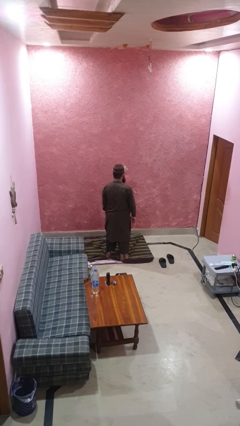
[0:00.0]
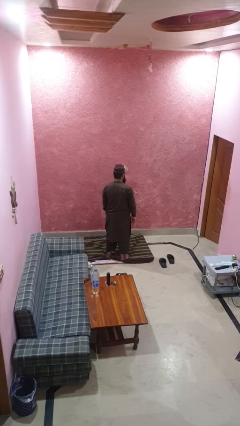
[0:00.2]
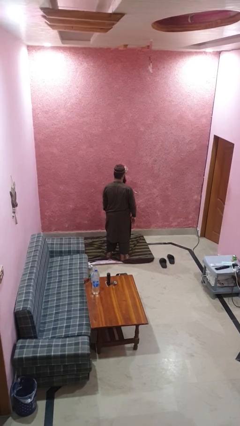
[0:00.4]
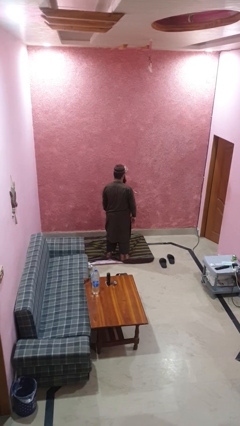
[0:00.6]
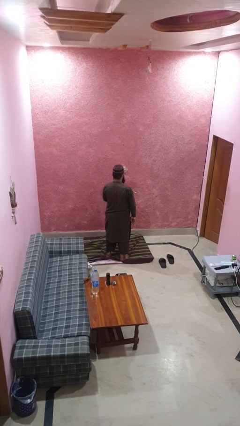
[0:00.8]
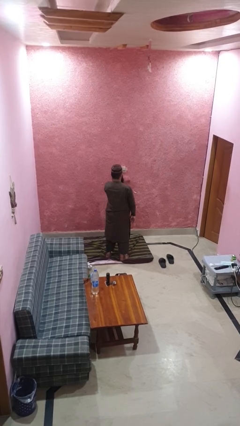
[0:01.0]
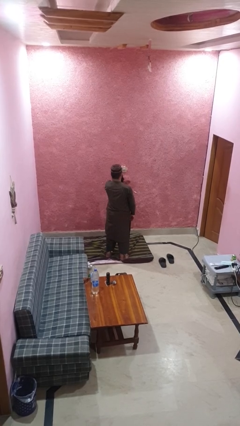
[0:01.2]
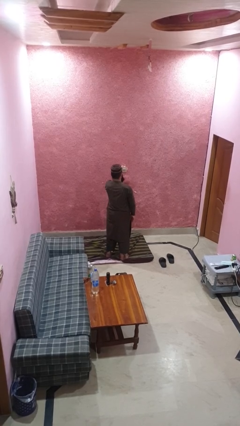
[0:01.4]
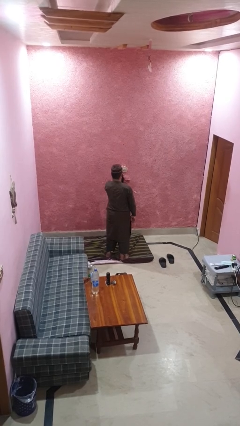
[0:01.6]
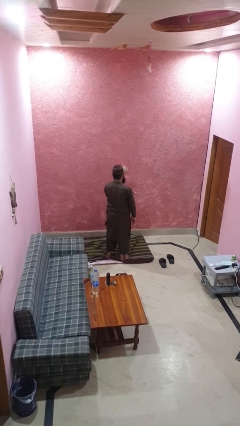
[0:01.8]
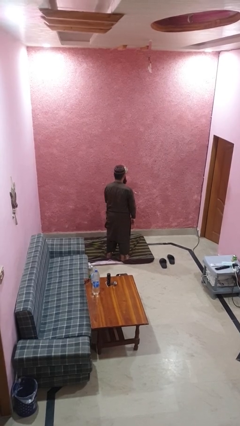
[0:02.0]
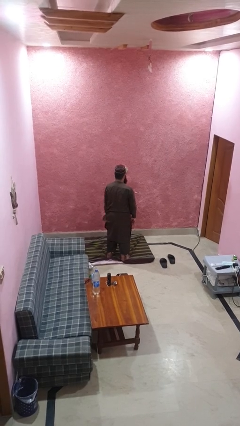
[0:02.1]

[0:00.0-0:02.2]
person drums on chest

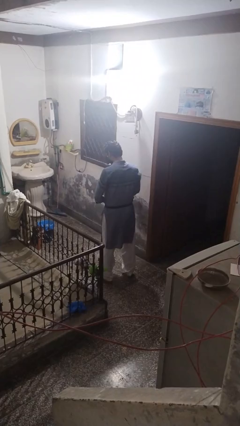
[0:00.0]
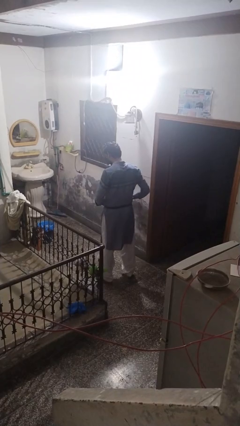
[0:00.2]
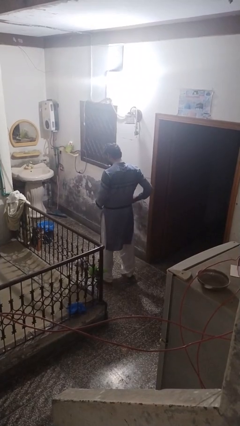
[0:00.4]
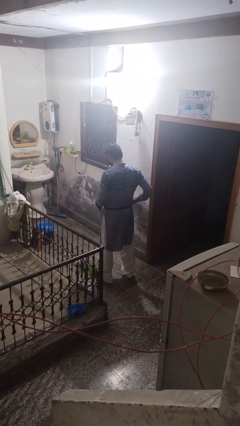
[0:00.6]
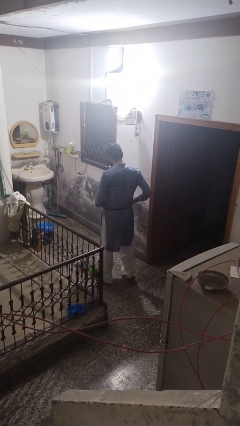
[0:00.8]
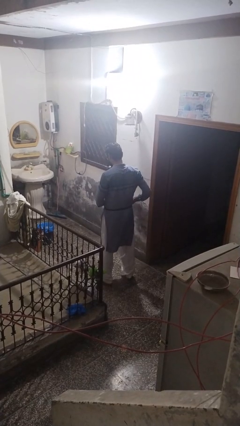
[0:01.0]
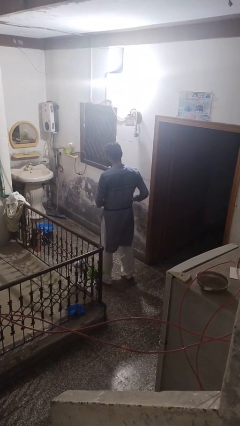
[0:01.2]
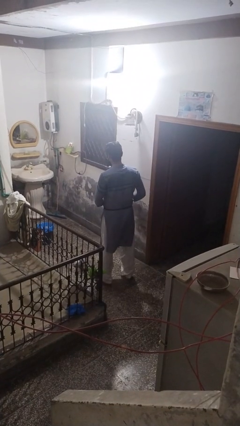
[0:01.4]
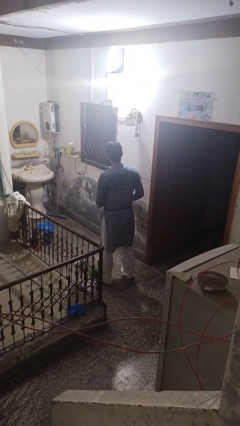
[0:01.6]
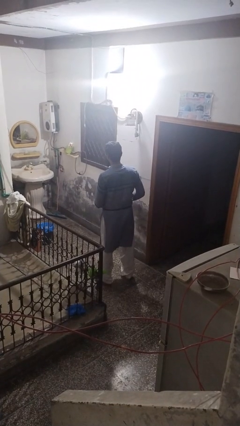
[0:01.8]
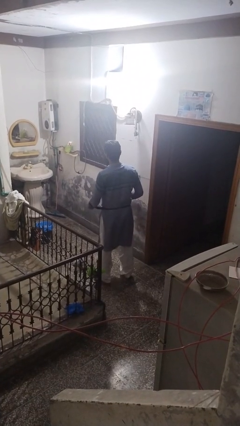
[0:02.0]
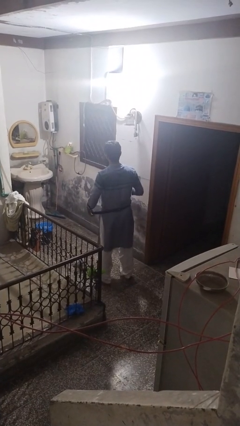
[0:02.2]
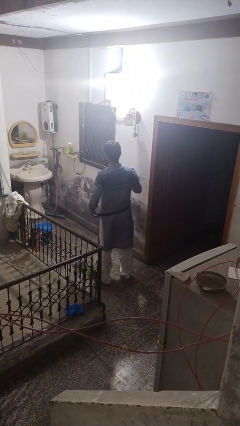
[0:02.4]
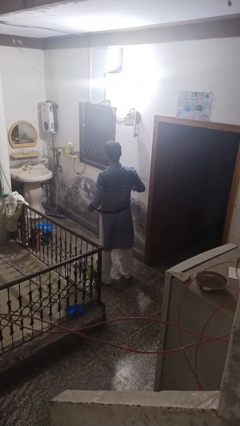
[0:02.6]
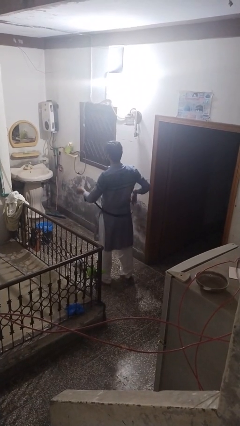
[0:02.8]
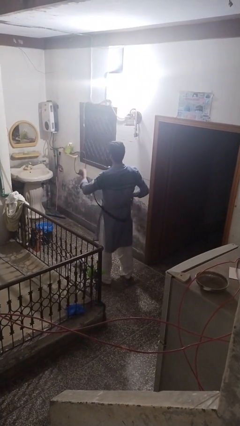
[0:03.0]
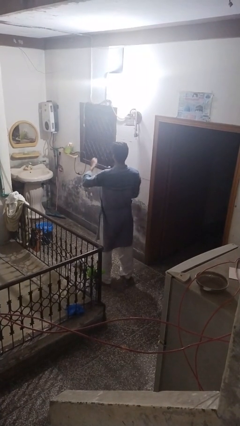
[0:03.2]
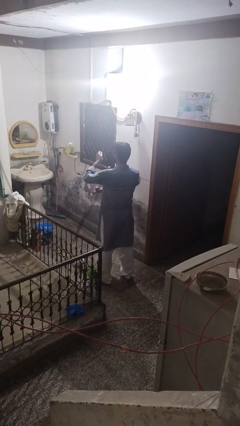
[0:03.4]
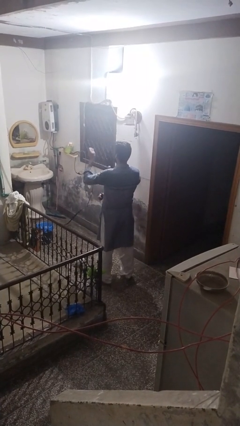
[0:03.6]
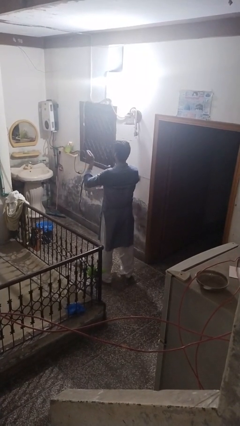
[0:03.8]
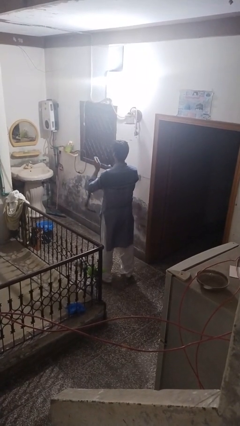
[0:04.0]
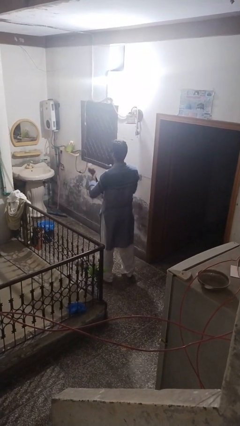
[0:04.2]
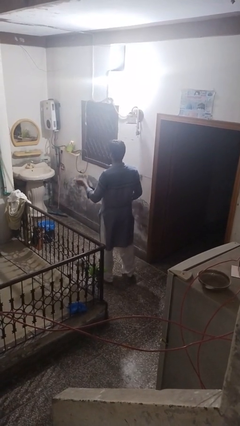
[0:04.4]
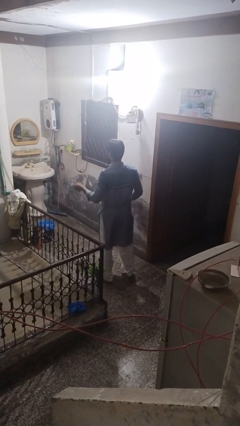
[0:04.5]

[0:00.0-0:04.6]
person takes off belt

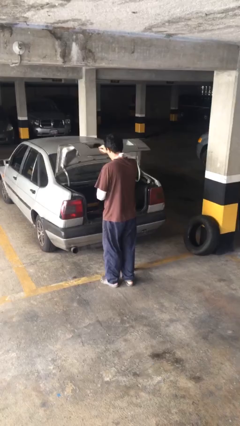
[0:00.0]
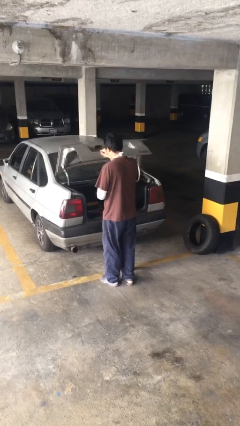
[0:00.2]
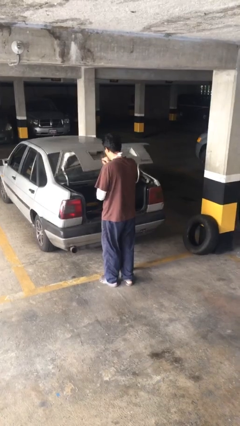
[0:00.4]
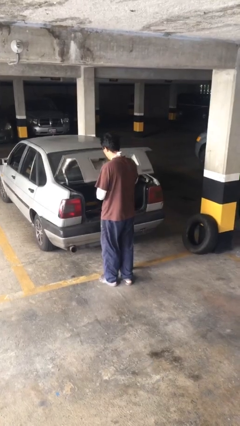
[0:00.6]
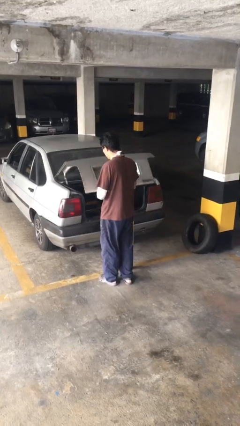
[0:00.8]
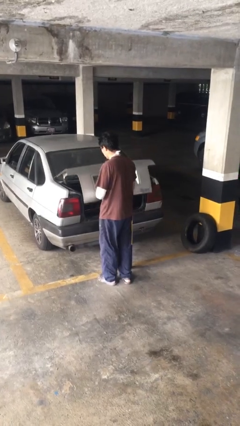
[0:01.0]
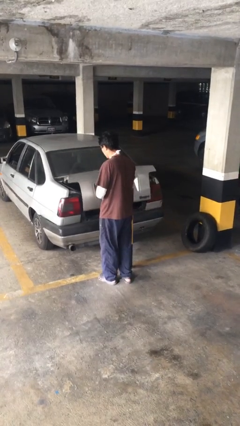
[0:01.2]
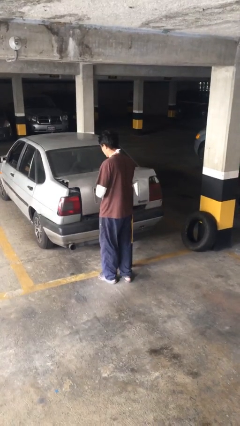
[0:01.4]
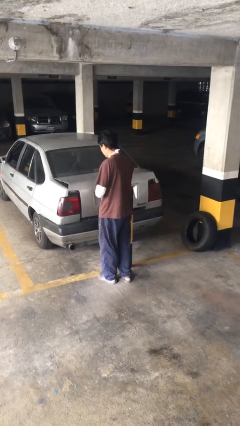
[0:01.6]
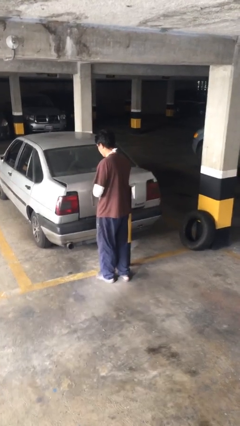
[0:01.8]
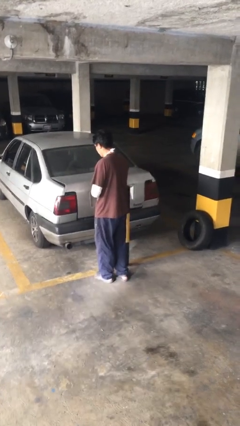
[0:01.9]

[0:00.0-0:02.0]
person closes car trunk

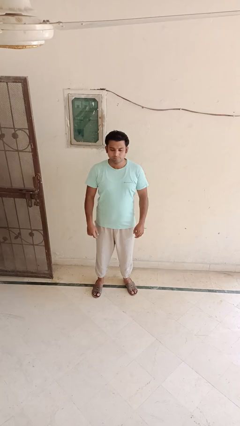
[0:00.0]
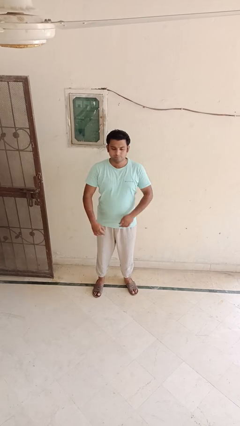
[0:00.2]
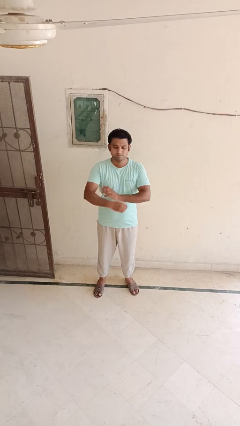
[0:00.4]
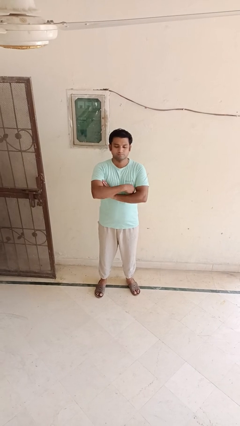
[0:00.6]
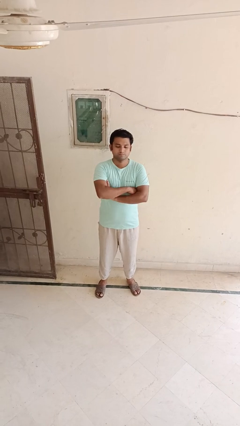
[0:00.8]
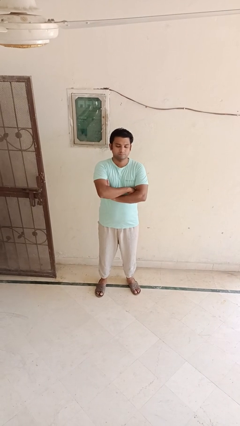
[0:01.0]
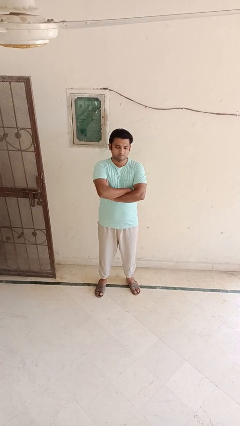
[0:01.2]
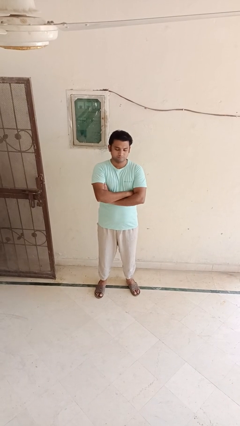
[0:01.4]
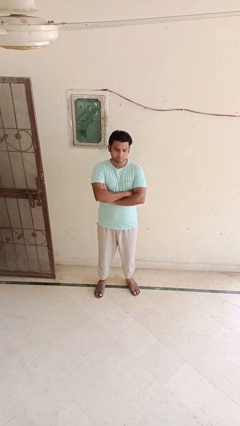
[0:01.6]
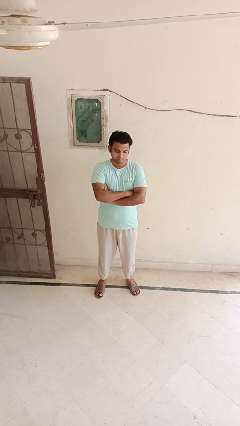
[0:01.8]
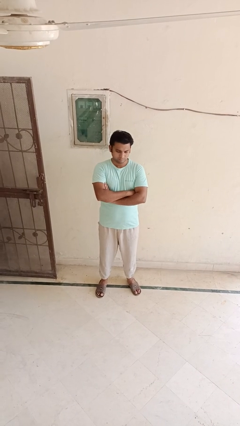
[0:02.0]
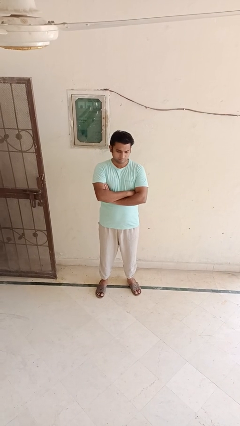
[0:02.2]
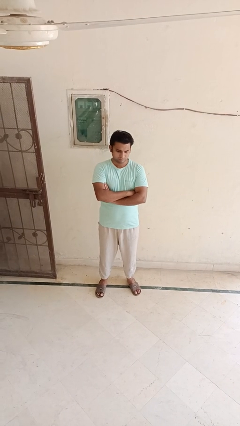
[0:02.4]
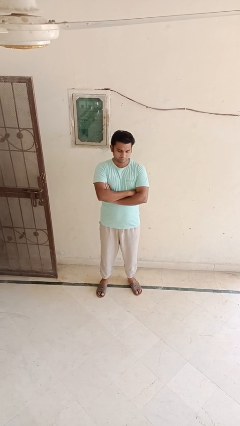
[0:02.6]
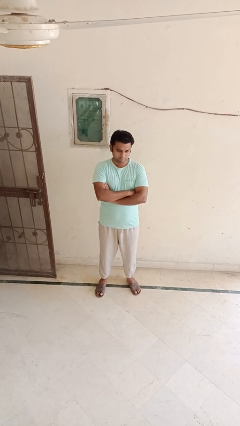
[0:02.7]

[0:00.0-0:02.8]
person crosses arms

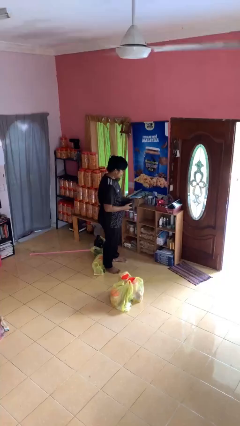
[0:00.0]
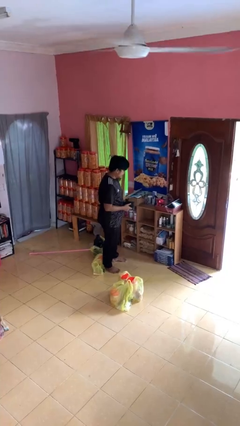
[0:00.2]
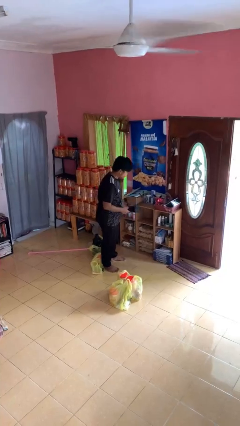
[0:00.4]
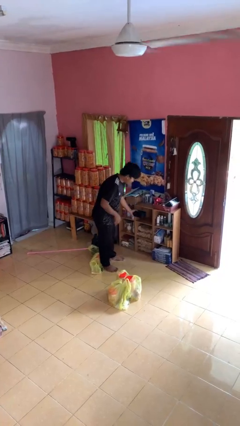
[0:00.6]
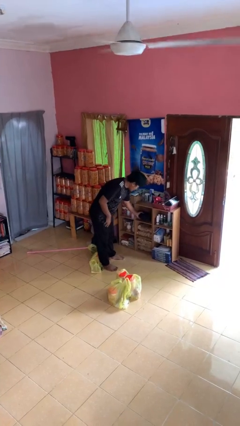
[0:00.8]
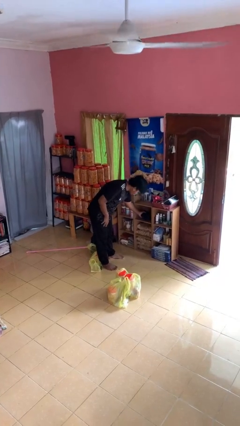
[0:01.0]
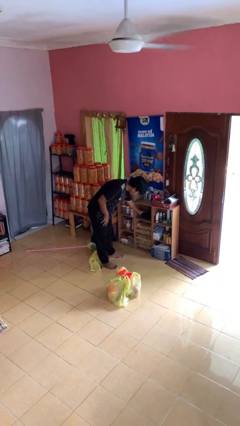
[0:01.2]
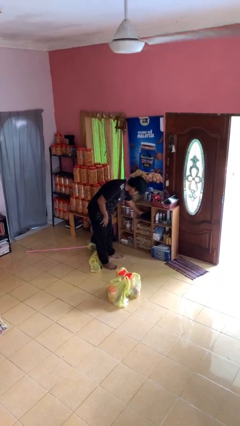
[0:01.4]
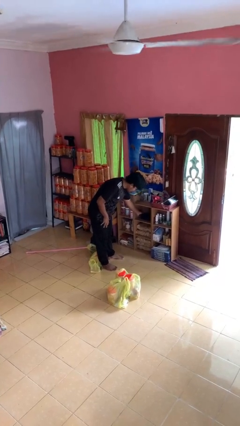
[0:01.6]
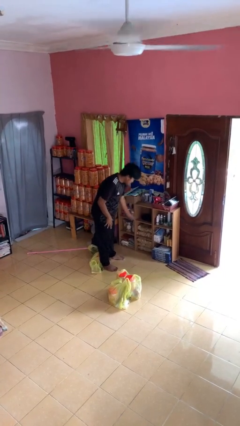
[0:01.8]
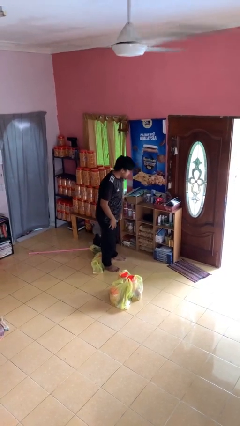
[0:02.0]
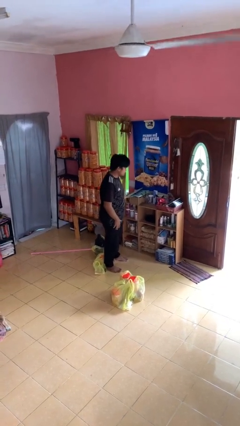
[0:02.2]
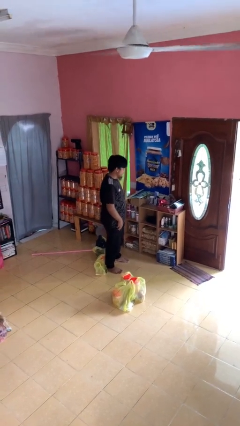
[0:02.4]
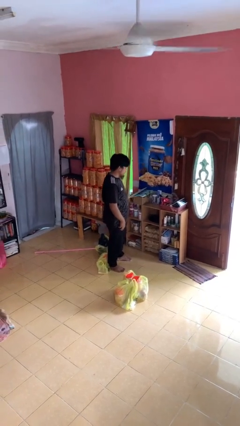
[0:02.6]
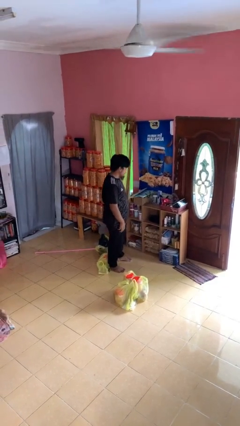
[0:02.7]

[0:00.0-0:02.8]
person puts object in cabinet

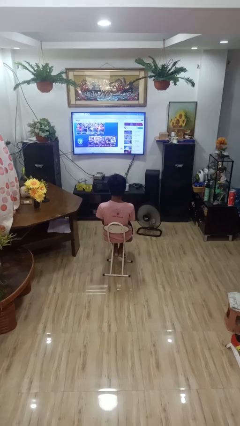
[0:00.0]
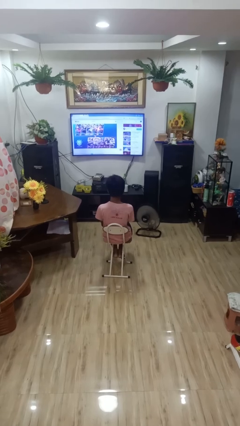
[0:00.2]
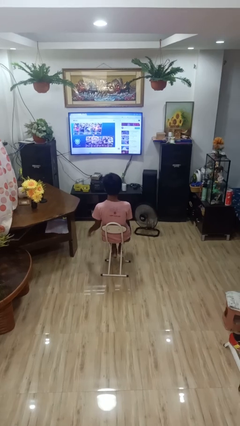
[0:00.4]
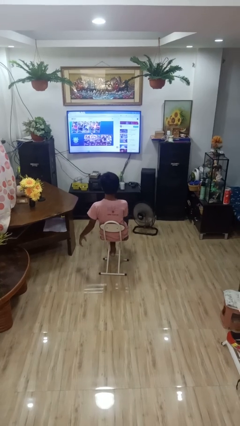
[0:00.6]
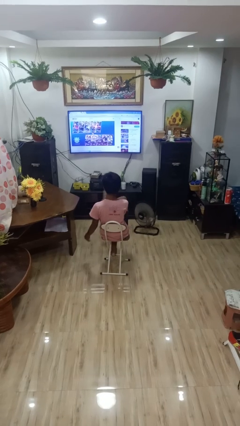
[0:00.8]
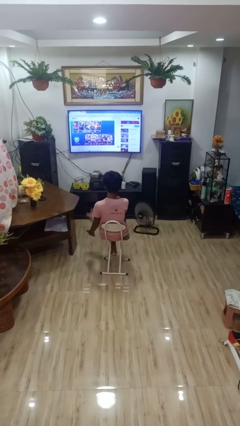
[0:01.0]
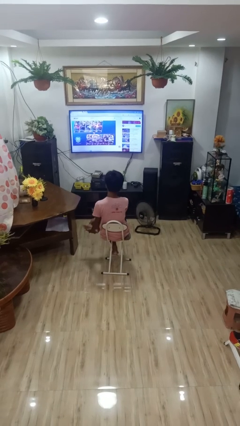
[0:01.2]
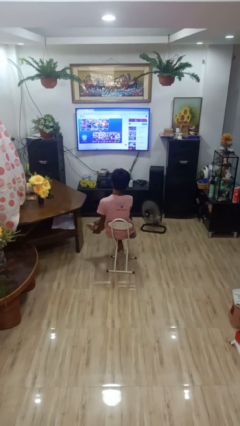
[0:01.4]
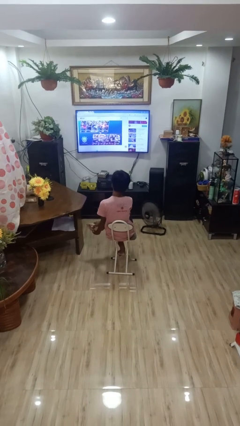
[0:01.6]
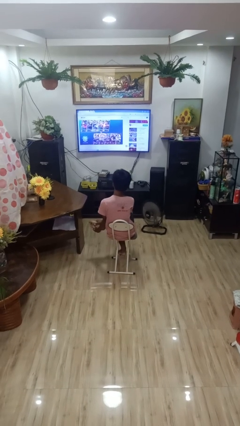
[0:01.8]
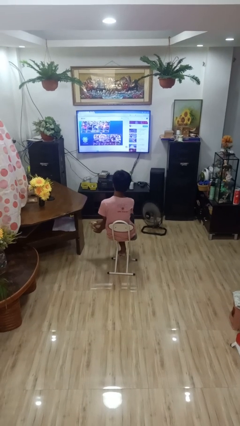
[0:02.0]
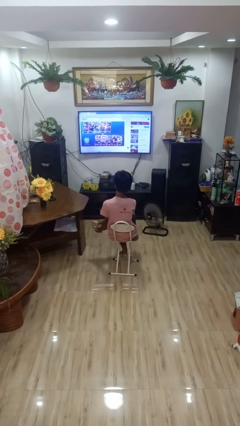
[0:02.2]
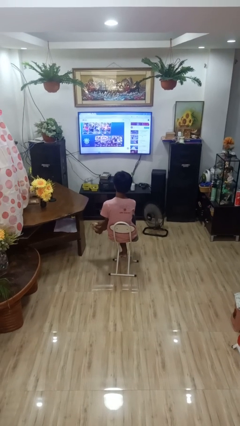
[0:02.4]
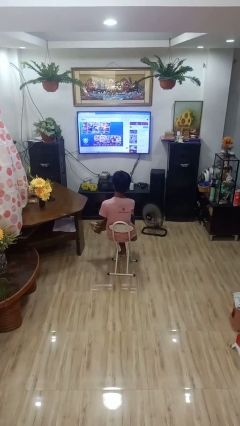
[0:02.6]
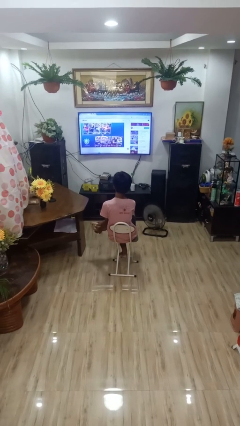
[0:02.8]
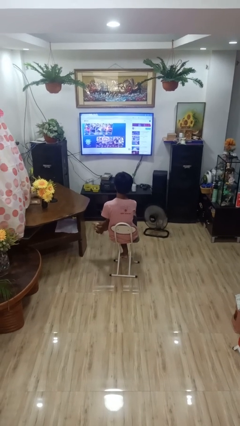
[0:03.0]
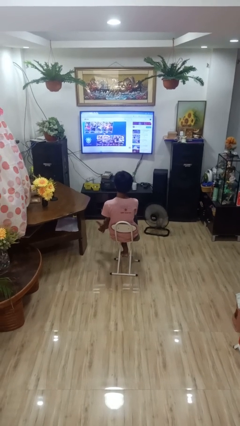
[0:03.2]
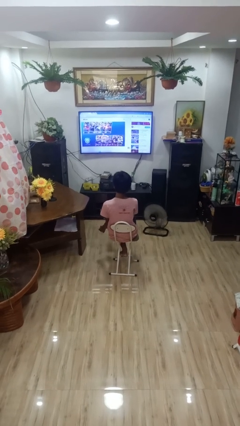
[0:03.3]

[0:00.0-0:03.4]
person rubs foot
